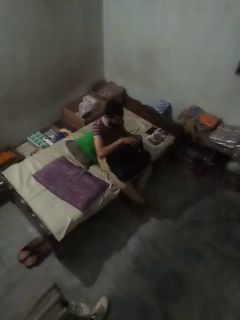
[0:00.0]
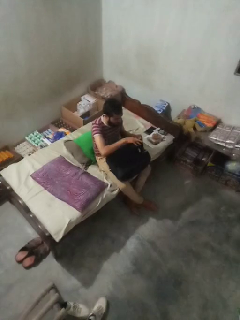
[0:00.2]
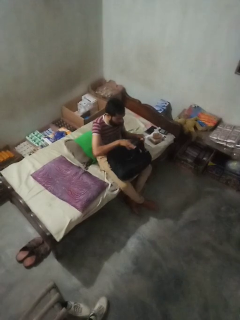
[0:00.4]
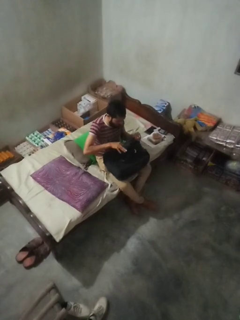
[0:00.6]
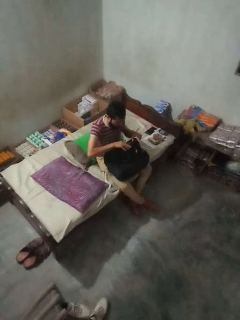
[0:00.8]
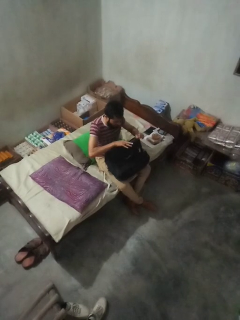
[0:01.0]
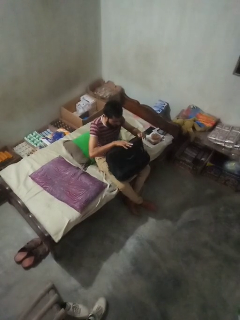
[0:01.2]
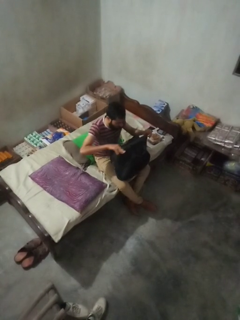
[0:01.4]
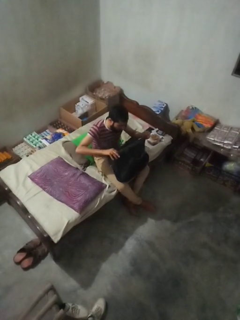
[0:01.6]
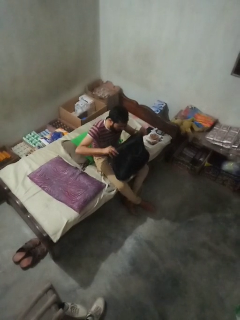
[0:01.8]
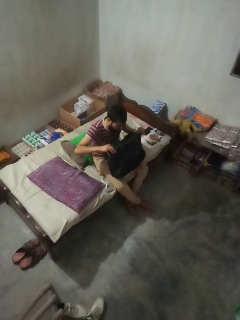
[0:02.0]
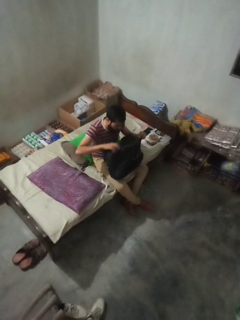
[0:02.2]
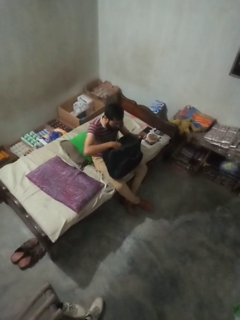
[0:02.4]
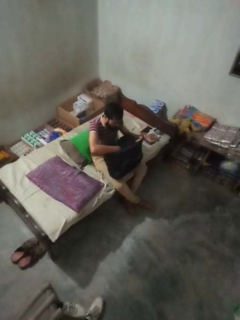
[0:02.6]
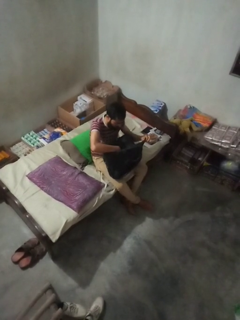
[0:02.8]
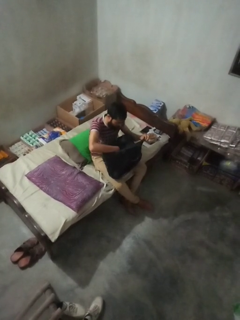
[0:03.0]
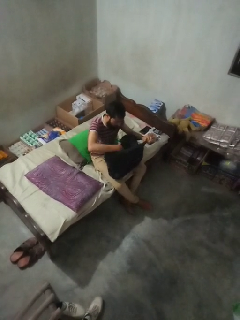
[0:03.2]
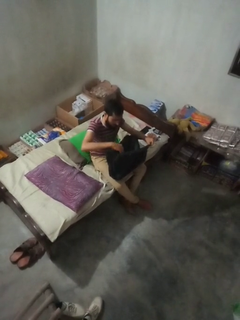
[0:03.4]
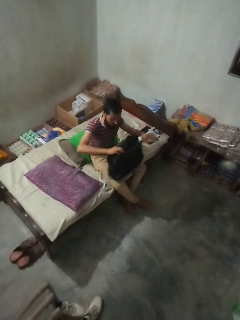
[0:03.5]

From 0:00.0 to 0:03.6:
person searches in bag

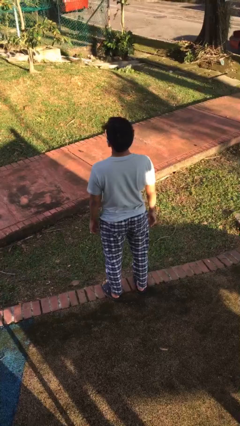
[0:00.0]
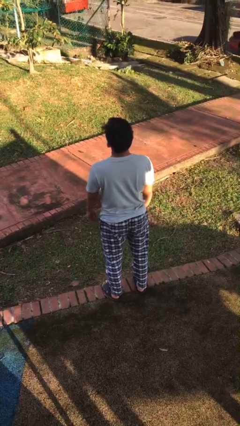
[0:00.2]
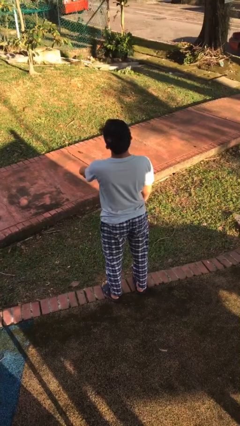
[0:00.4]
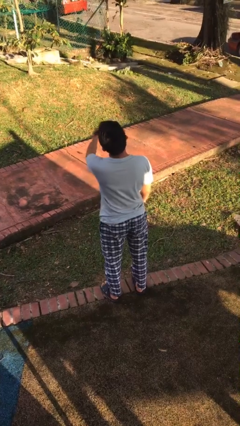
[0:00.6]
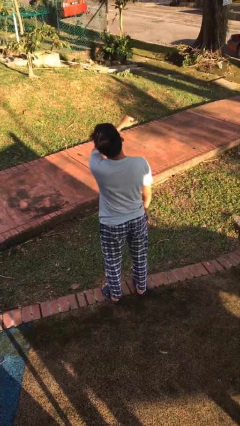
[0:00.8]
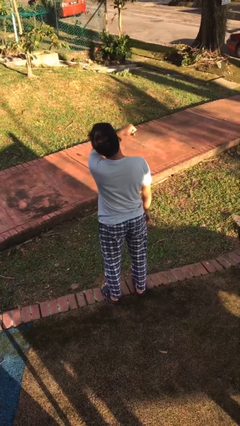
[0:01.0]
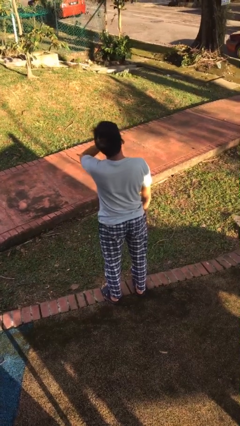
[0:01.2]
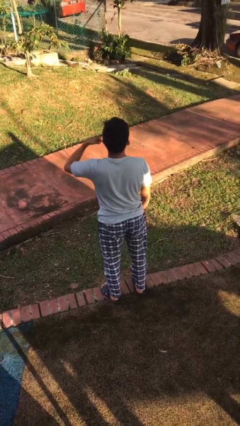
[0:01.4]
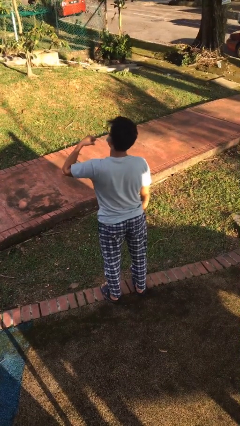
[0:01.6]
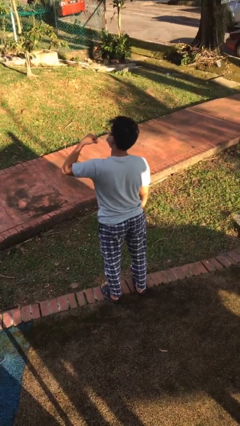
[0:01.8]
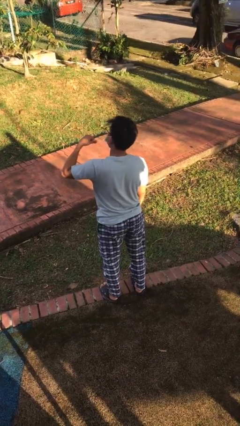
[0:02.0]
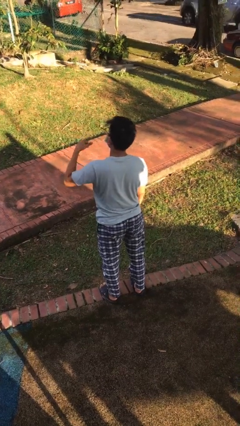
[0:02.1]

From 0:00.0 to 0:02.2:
person gestures cut

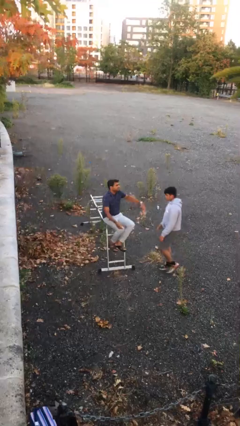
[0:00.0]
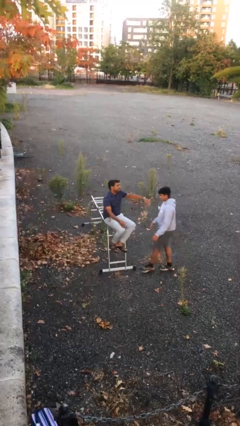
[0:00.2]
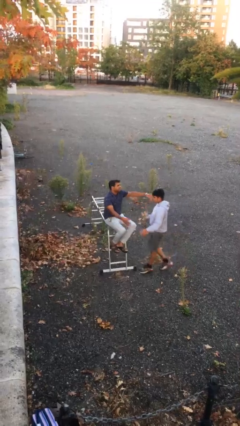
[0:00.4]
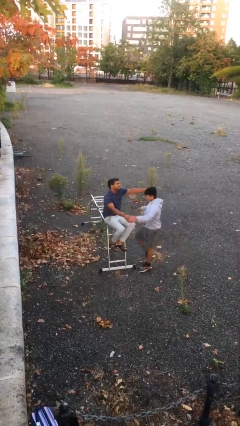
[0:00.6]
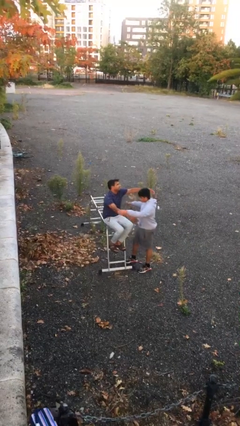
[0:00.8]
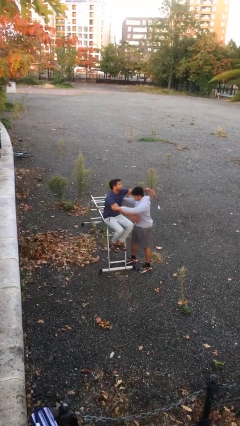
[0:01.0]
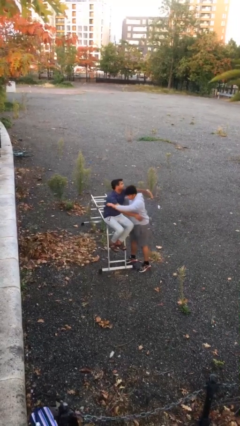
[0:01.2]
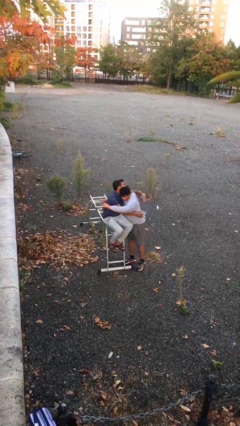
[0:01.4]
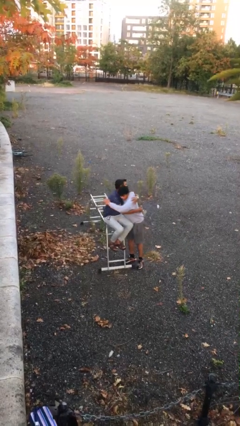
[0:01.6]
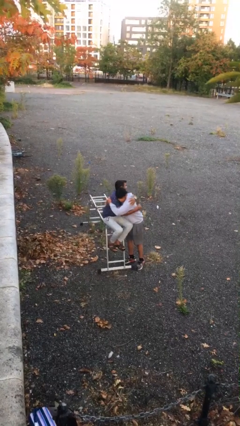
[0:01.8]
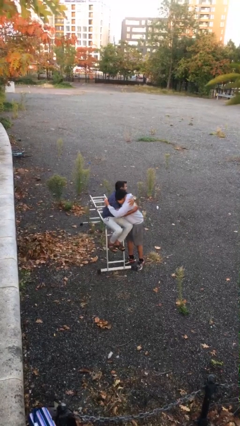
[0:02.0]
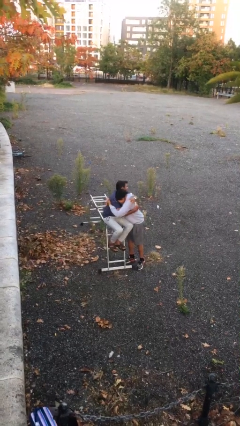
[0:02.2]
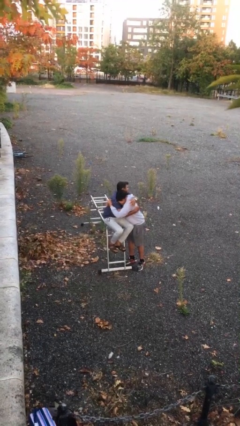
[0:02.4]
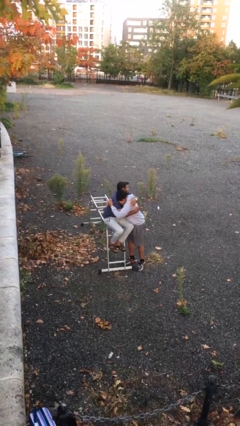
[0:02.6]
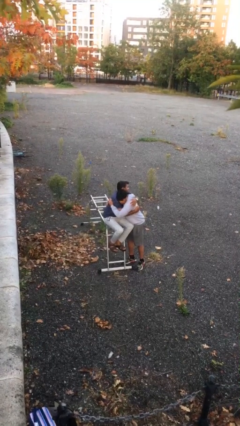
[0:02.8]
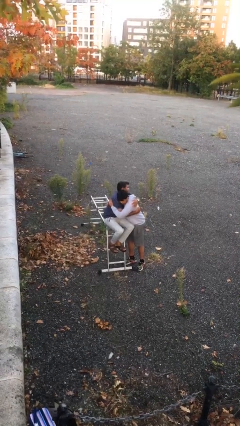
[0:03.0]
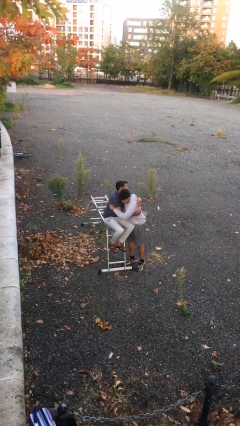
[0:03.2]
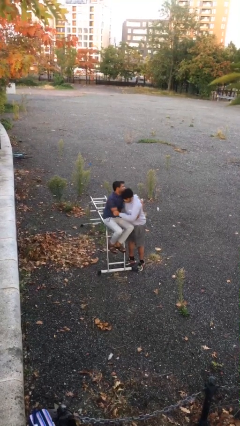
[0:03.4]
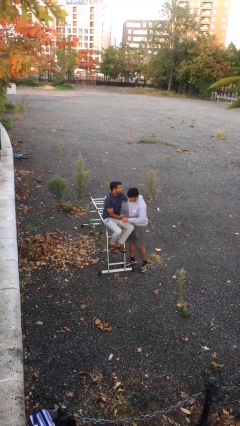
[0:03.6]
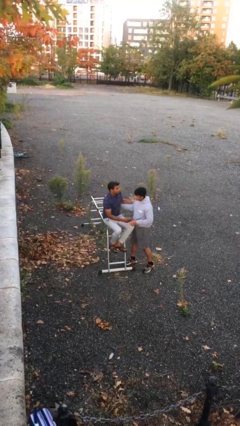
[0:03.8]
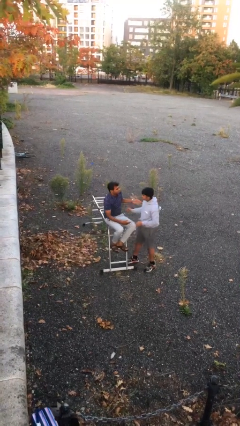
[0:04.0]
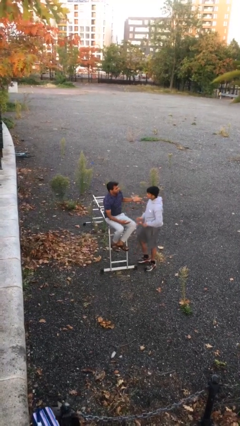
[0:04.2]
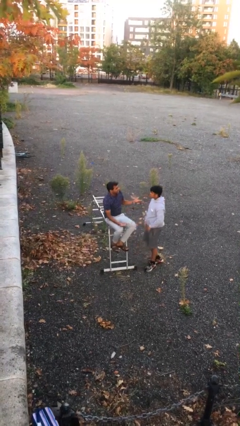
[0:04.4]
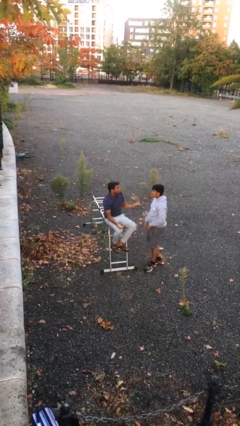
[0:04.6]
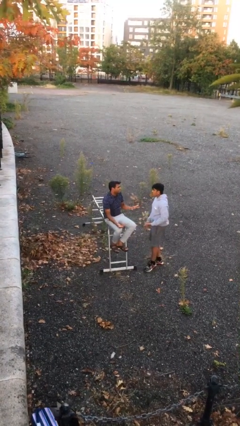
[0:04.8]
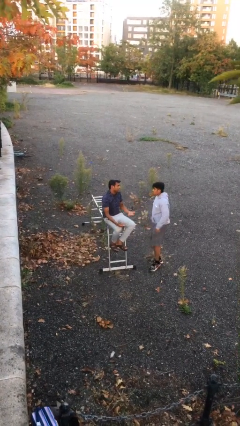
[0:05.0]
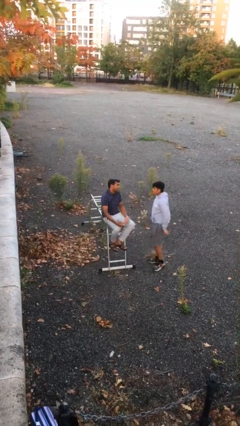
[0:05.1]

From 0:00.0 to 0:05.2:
person embraces person

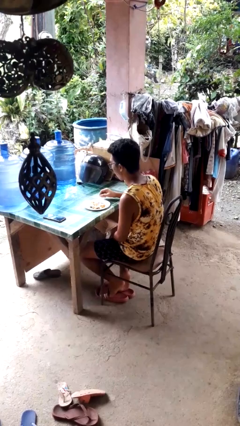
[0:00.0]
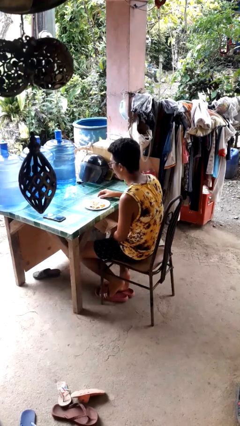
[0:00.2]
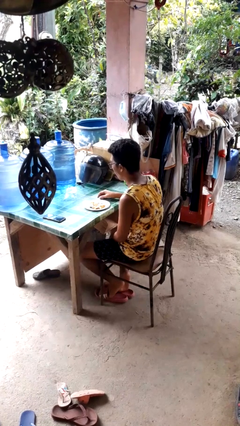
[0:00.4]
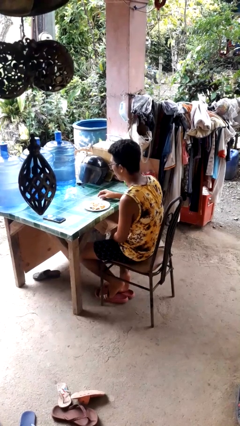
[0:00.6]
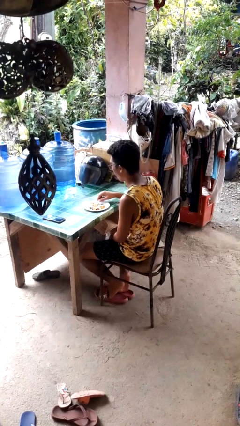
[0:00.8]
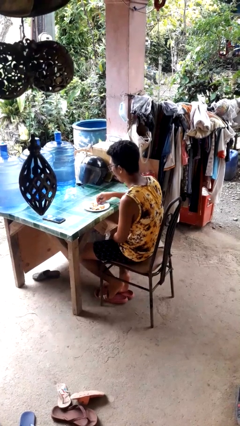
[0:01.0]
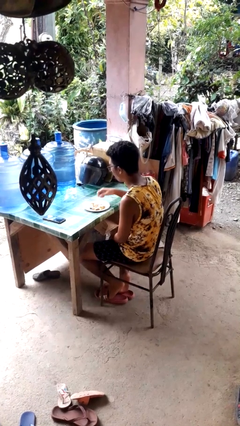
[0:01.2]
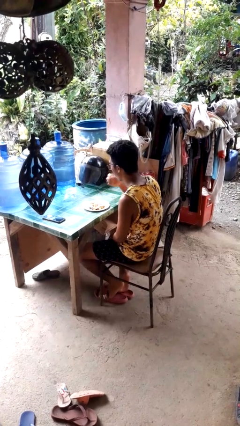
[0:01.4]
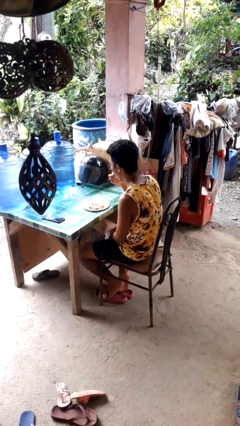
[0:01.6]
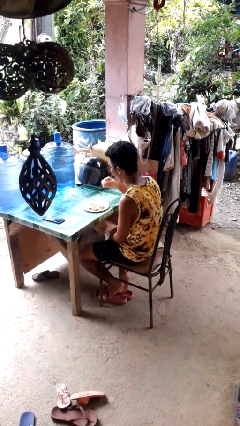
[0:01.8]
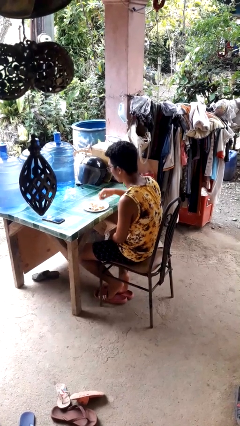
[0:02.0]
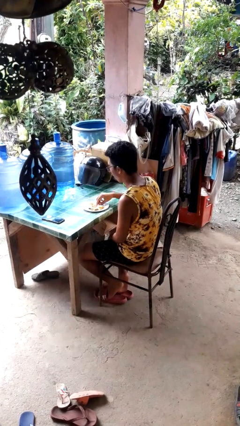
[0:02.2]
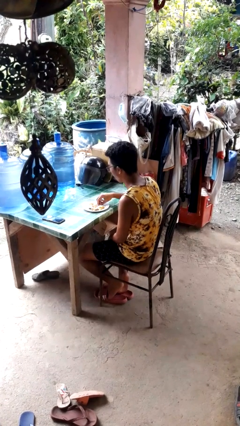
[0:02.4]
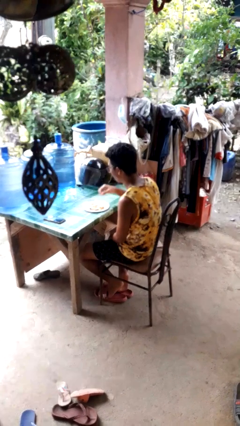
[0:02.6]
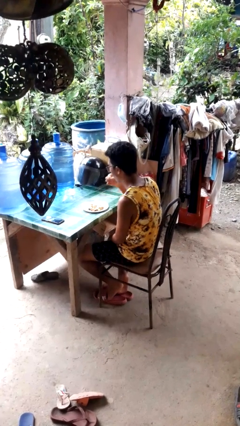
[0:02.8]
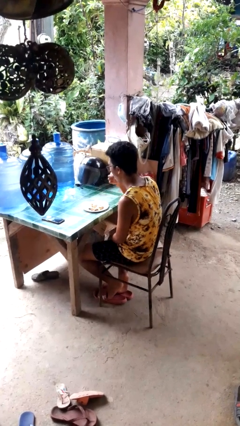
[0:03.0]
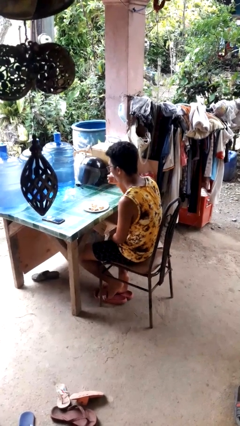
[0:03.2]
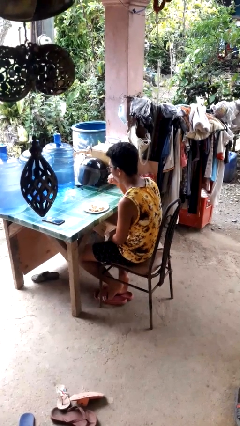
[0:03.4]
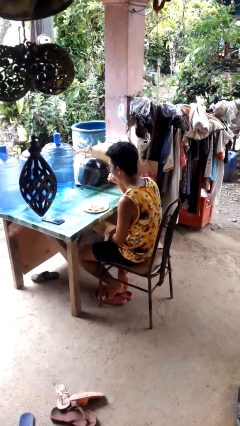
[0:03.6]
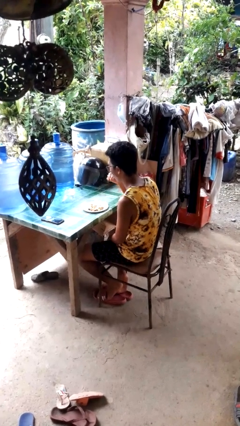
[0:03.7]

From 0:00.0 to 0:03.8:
person eats with hands

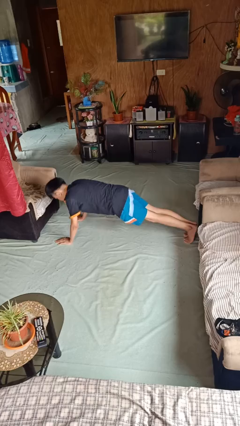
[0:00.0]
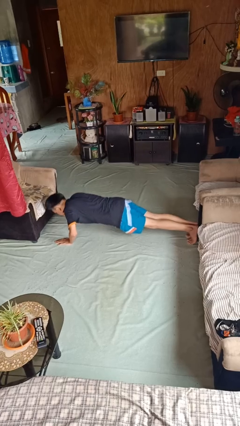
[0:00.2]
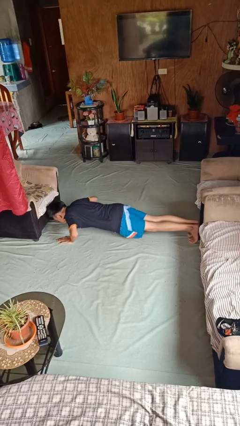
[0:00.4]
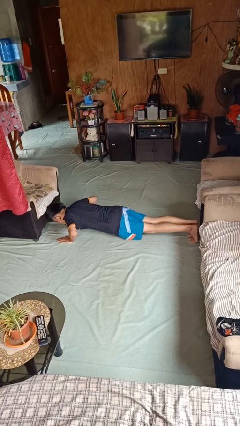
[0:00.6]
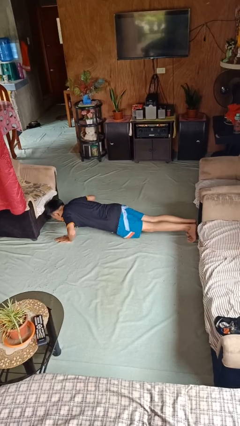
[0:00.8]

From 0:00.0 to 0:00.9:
person exercises with pushup

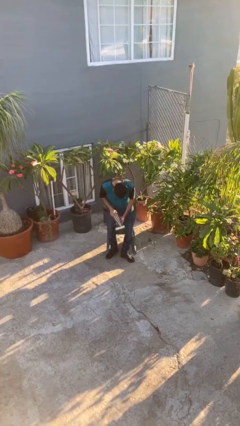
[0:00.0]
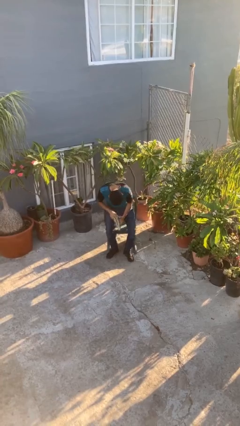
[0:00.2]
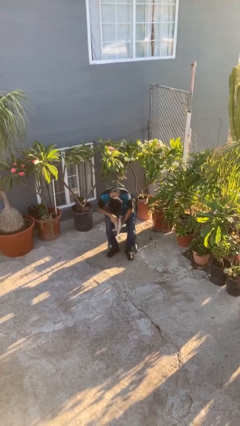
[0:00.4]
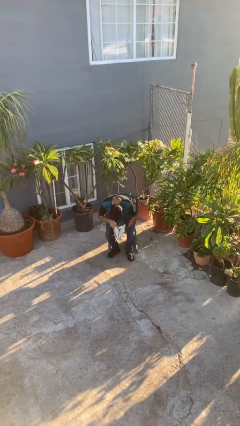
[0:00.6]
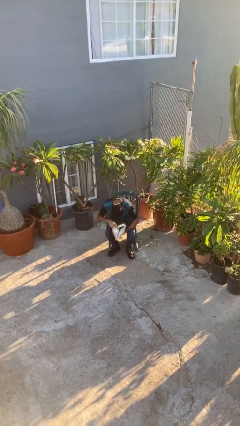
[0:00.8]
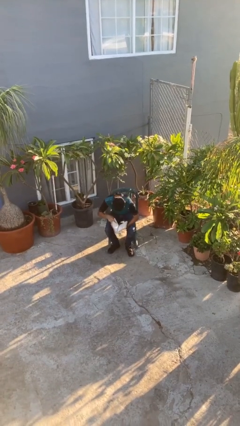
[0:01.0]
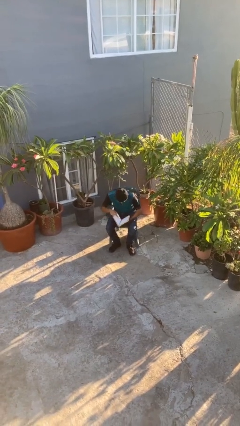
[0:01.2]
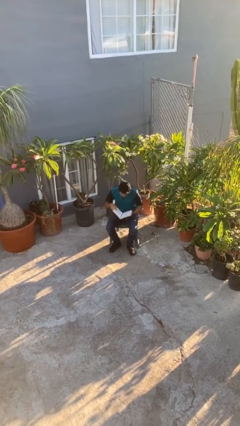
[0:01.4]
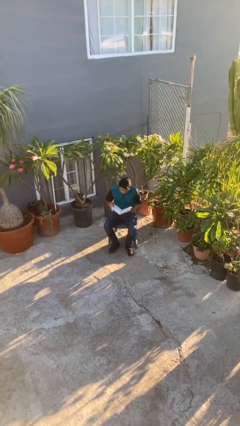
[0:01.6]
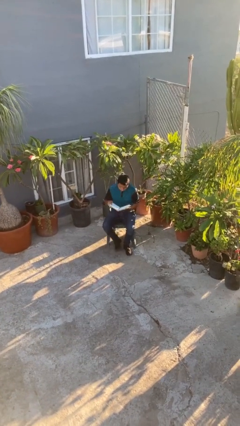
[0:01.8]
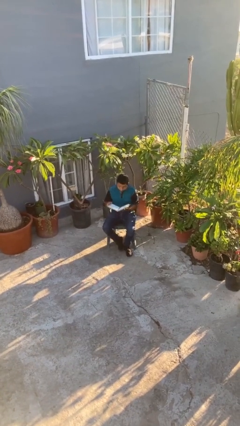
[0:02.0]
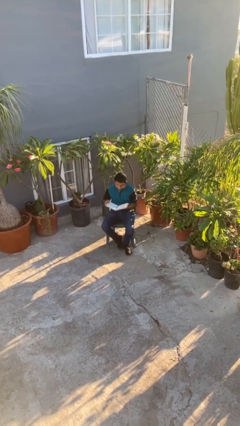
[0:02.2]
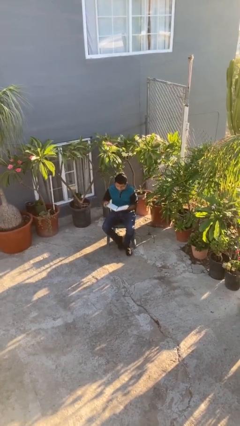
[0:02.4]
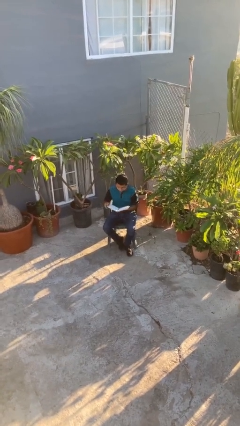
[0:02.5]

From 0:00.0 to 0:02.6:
person sits down
